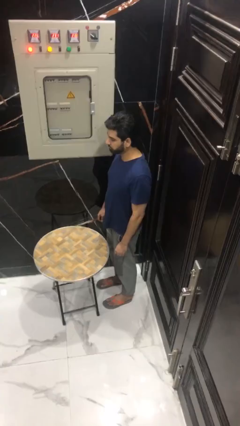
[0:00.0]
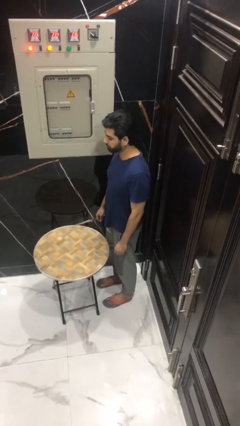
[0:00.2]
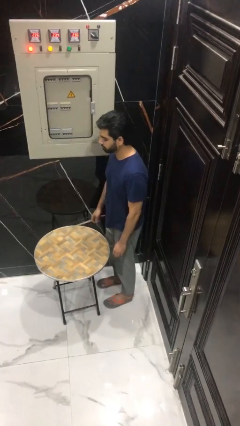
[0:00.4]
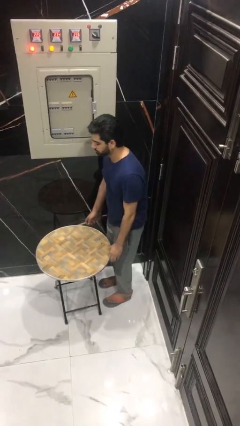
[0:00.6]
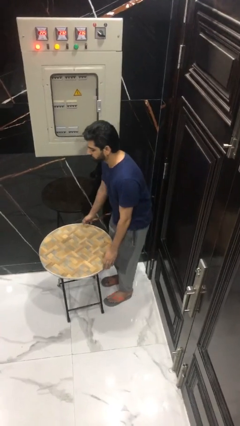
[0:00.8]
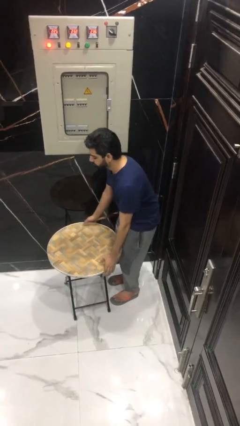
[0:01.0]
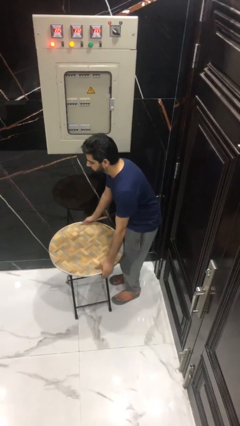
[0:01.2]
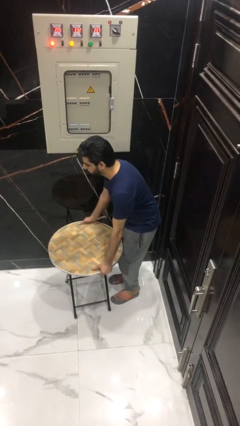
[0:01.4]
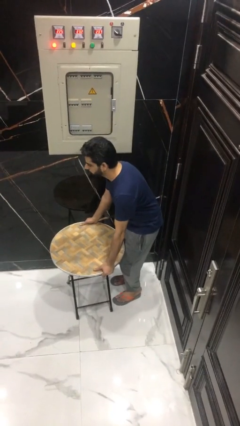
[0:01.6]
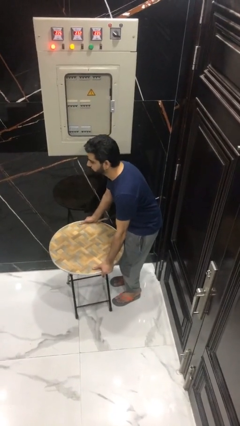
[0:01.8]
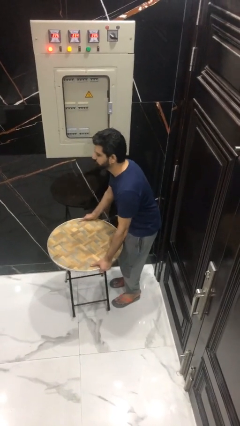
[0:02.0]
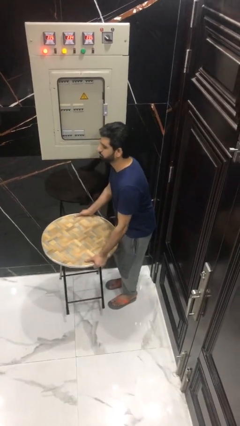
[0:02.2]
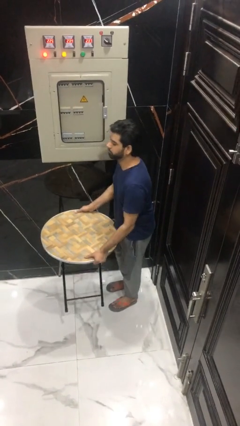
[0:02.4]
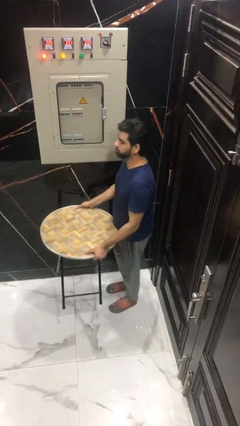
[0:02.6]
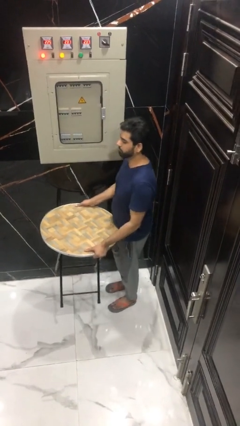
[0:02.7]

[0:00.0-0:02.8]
person picks up object from floor

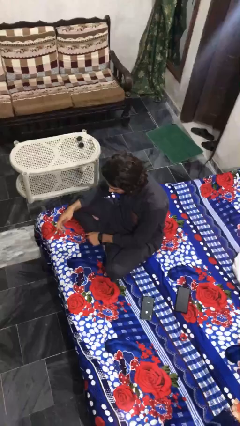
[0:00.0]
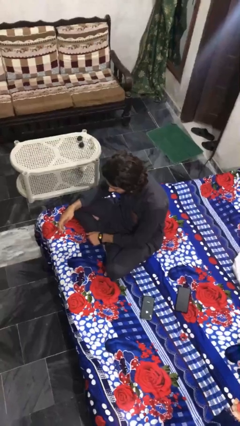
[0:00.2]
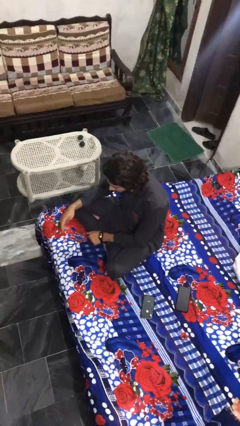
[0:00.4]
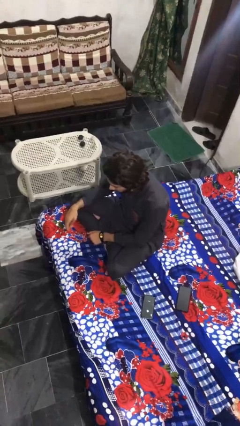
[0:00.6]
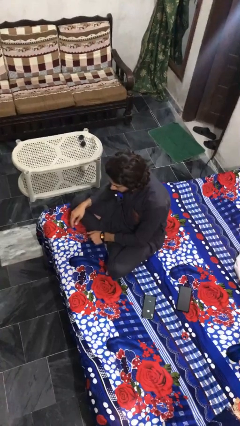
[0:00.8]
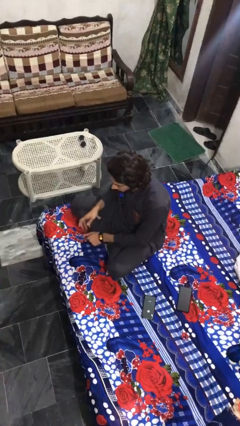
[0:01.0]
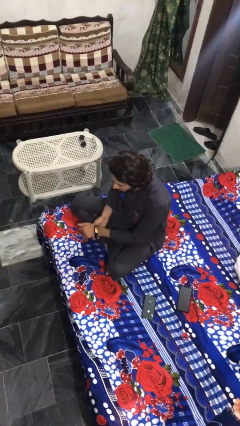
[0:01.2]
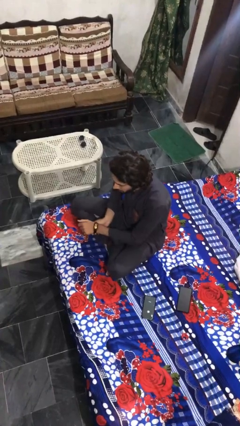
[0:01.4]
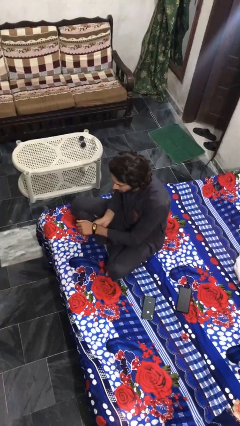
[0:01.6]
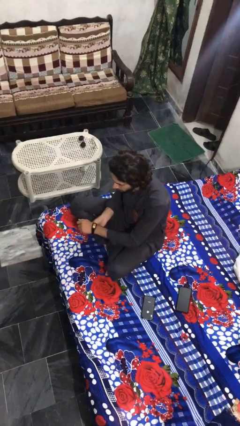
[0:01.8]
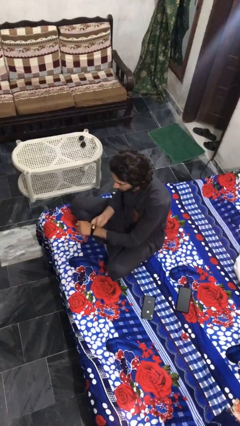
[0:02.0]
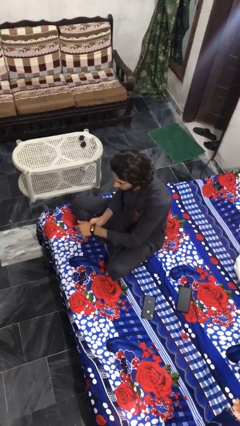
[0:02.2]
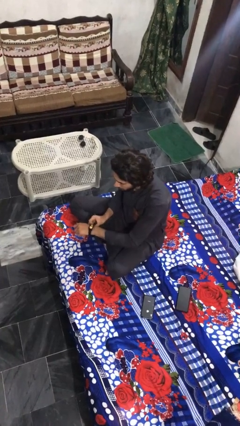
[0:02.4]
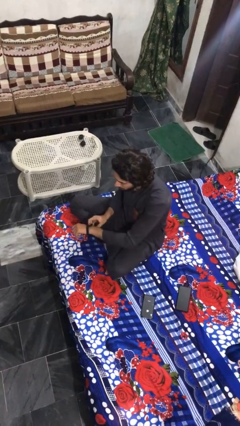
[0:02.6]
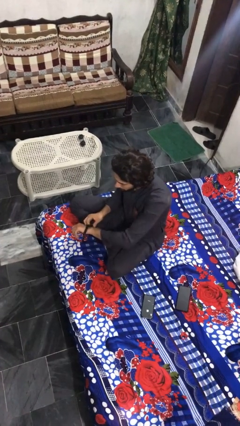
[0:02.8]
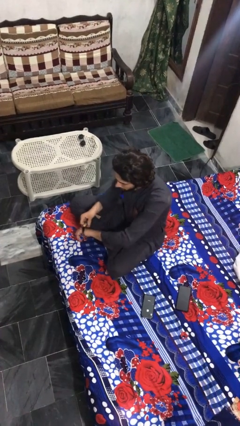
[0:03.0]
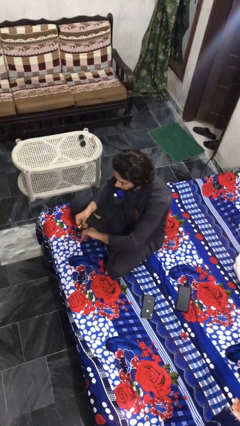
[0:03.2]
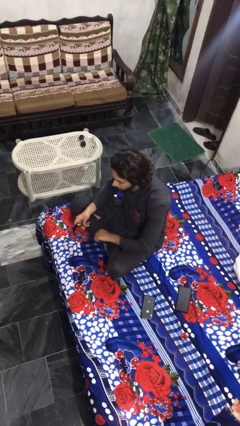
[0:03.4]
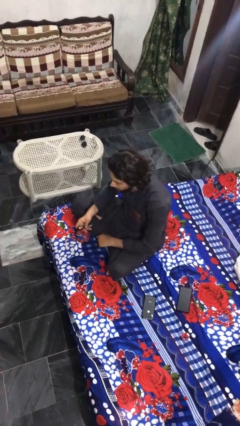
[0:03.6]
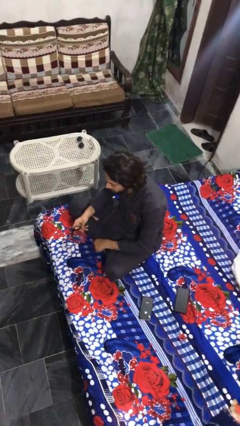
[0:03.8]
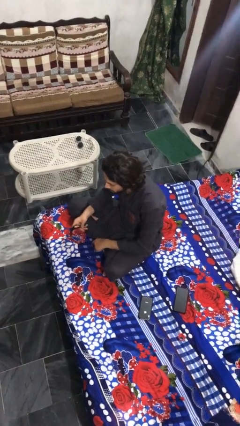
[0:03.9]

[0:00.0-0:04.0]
person takes off wristwatch

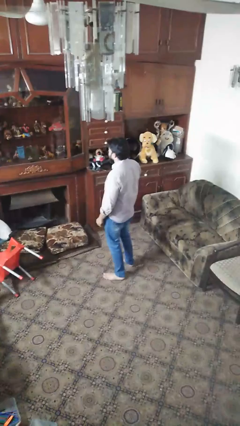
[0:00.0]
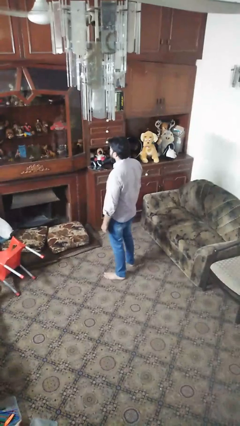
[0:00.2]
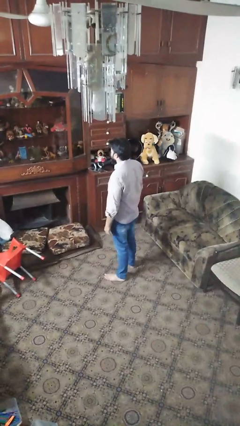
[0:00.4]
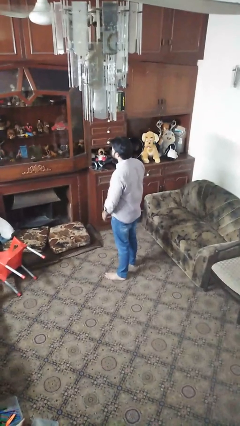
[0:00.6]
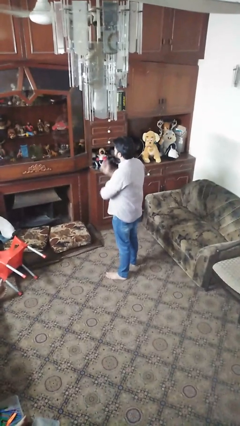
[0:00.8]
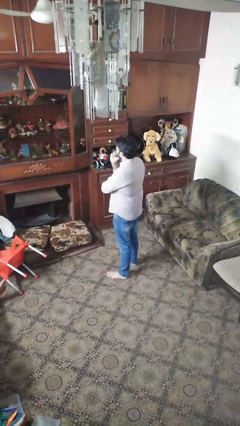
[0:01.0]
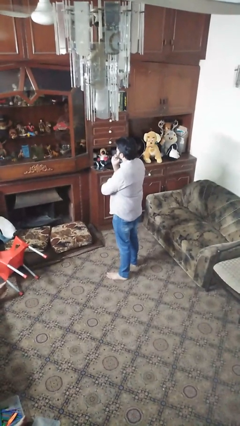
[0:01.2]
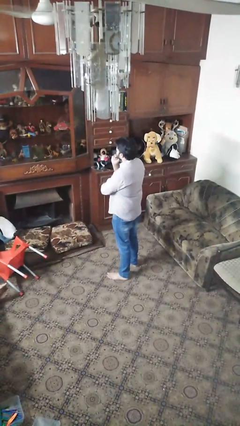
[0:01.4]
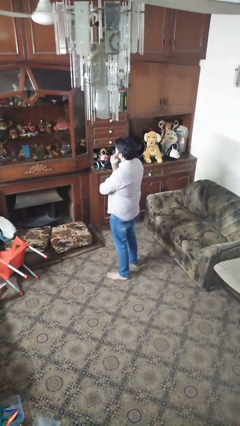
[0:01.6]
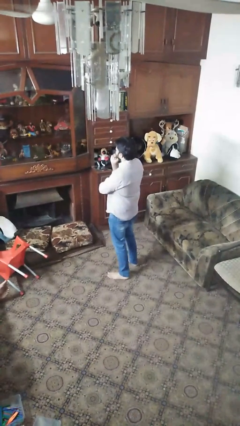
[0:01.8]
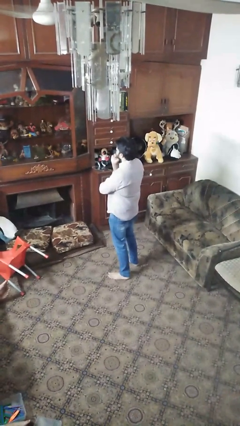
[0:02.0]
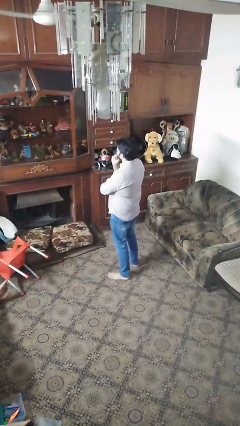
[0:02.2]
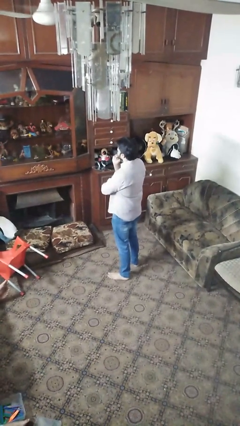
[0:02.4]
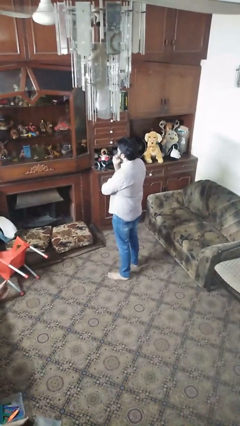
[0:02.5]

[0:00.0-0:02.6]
person strokes chin

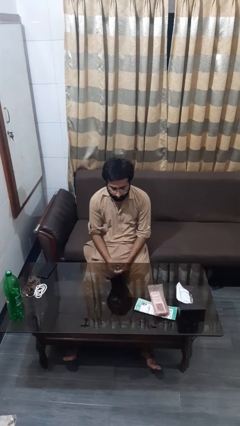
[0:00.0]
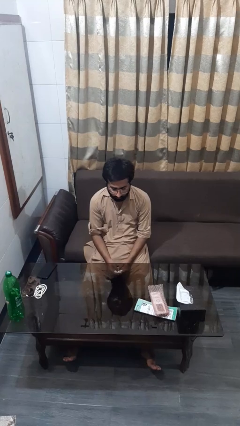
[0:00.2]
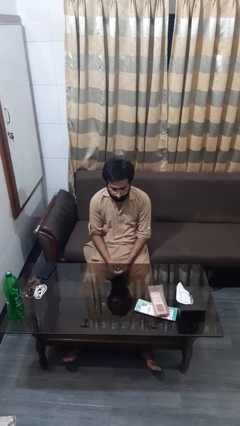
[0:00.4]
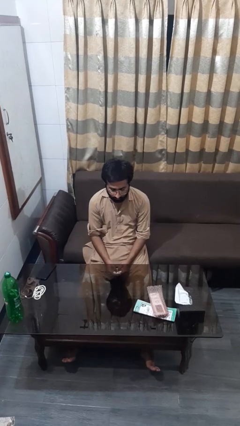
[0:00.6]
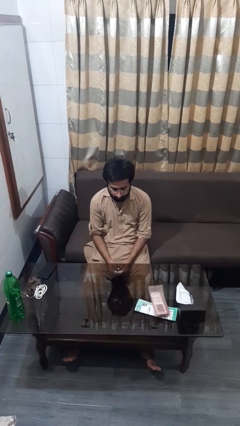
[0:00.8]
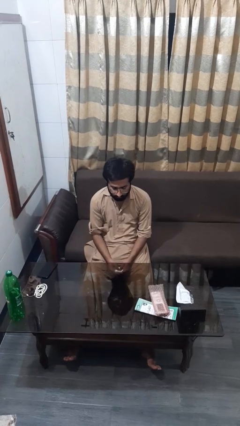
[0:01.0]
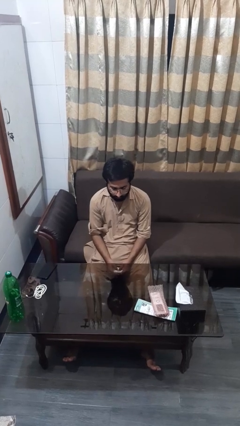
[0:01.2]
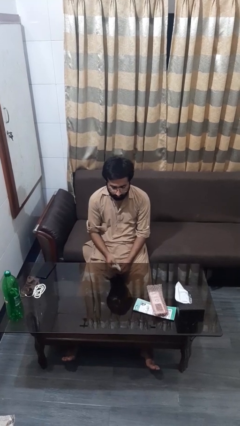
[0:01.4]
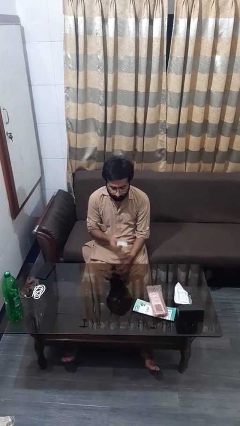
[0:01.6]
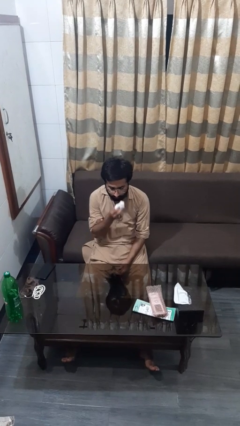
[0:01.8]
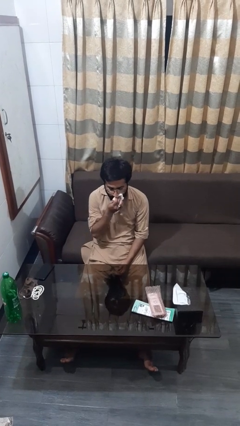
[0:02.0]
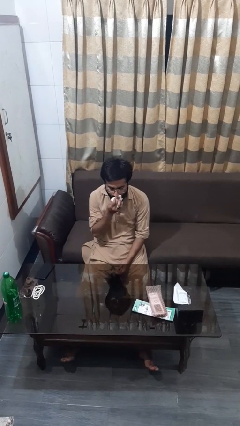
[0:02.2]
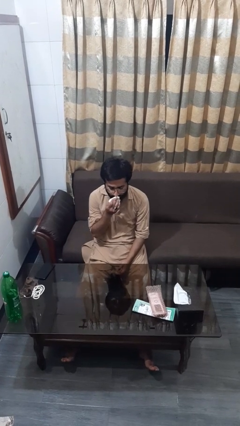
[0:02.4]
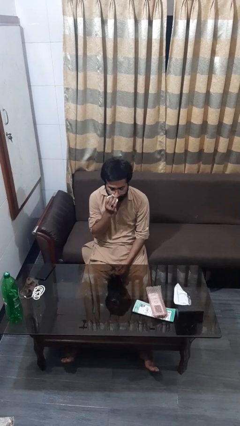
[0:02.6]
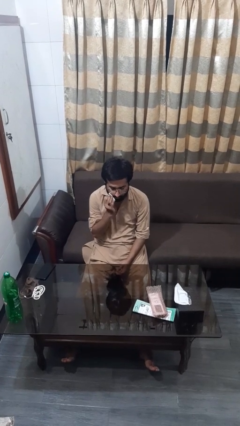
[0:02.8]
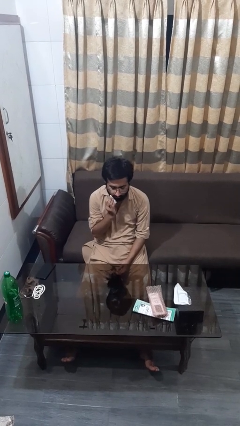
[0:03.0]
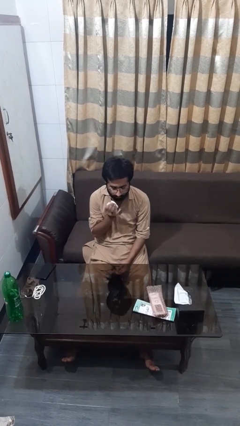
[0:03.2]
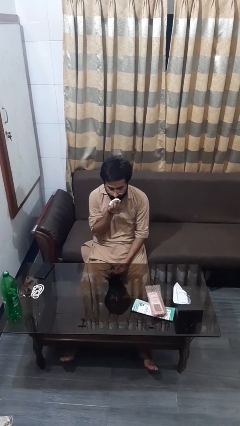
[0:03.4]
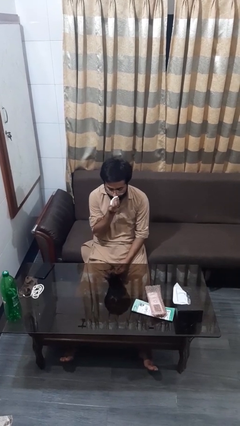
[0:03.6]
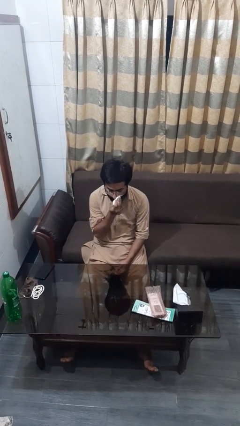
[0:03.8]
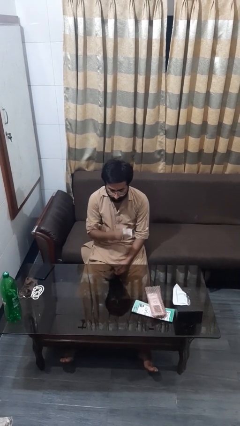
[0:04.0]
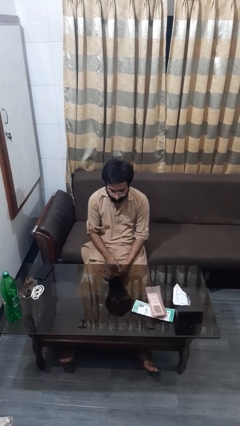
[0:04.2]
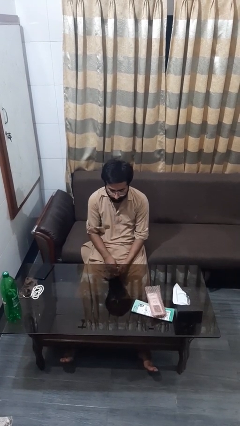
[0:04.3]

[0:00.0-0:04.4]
person wipes mouth with napkin

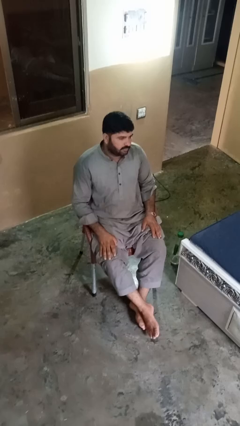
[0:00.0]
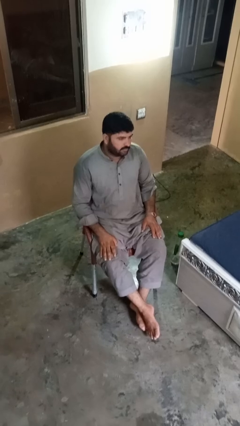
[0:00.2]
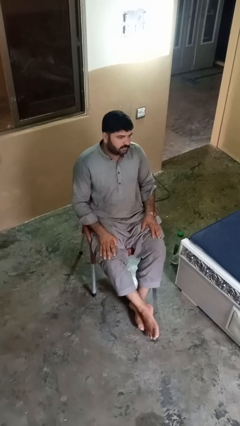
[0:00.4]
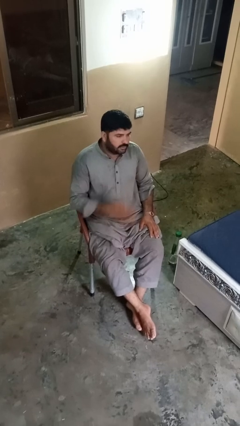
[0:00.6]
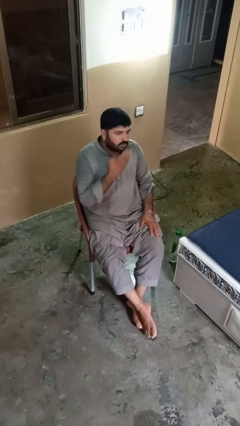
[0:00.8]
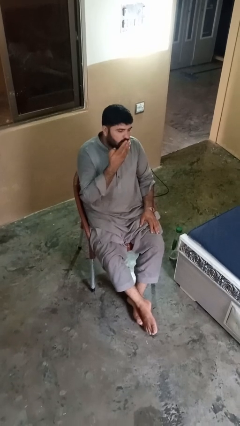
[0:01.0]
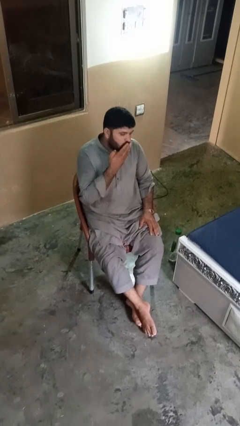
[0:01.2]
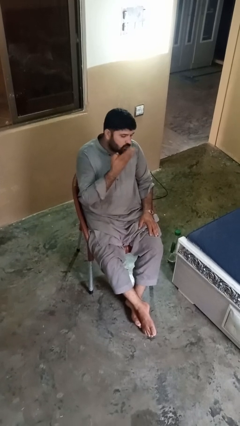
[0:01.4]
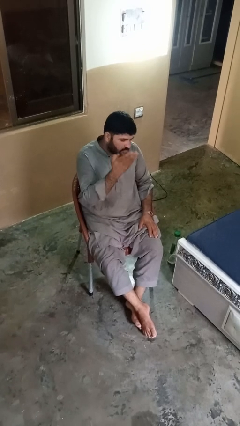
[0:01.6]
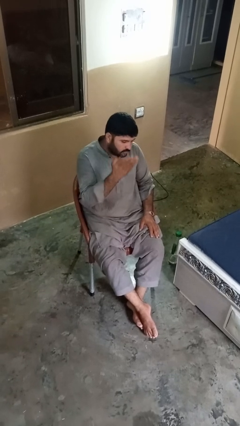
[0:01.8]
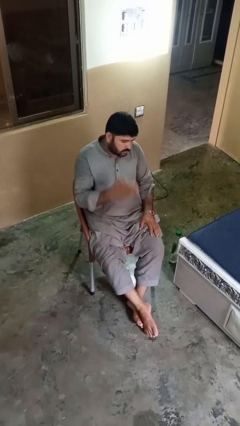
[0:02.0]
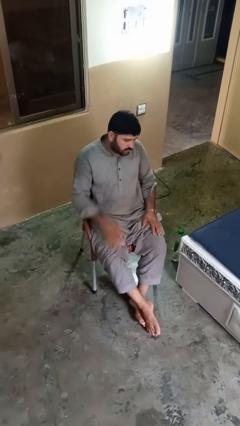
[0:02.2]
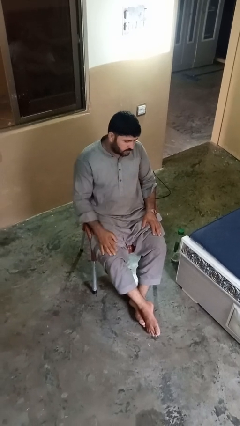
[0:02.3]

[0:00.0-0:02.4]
person gestures blow kiss

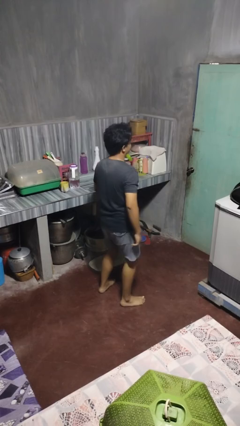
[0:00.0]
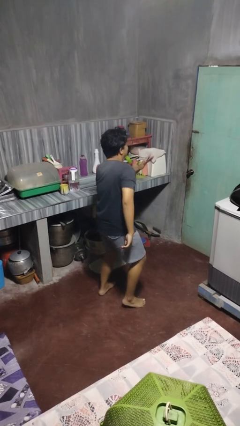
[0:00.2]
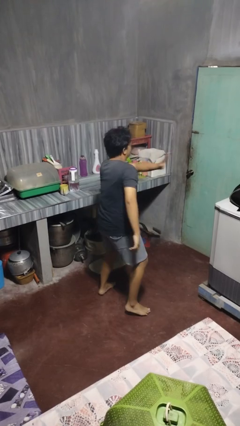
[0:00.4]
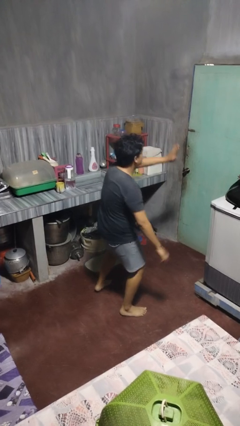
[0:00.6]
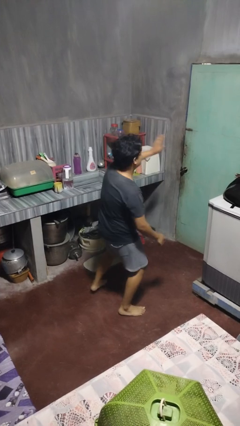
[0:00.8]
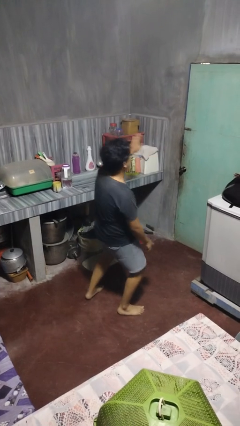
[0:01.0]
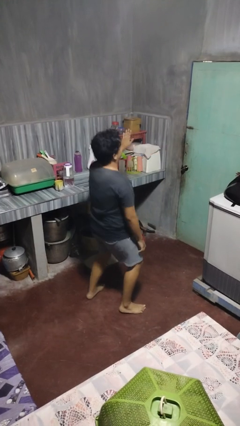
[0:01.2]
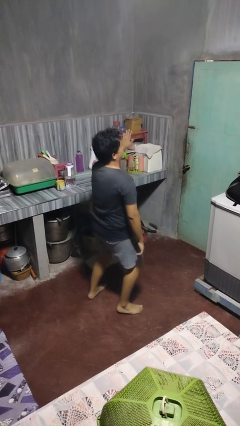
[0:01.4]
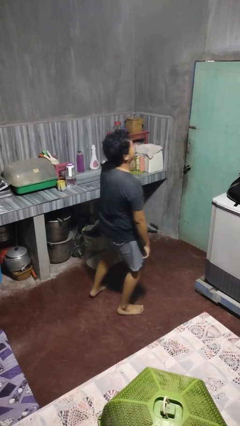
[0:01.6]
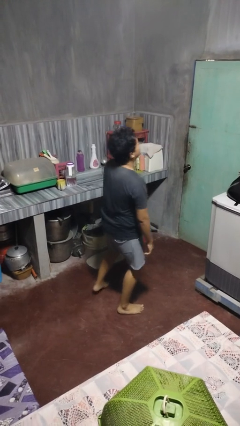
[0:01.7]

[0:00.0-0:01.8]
person dances in place
